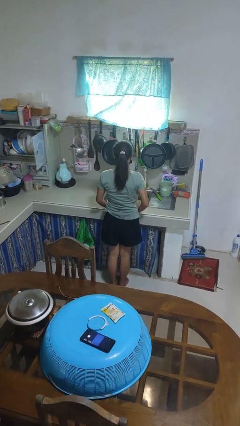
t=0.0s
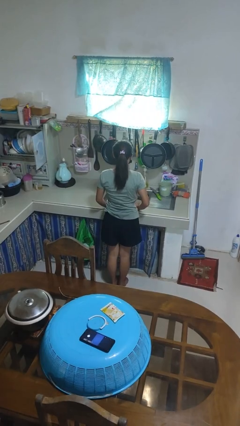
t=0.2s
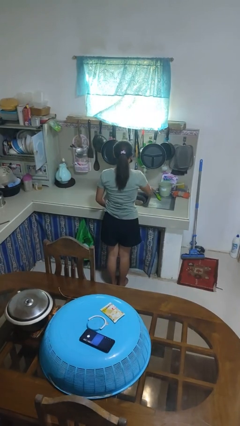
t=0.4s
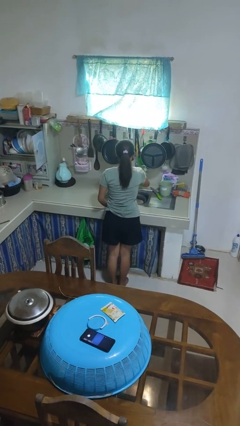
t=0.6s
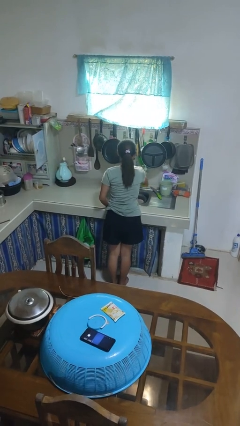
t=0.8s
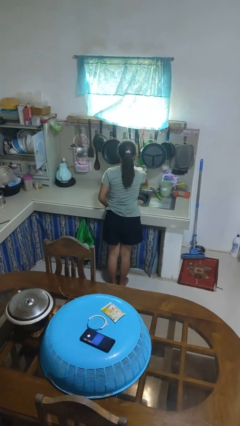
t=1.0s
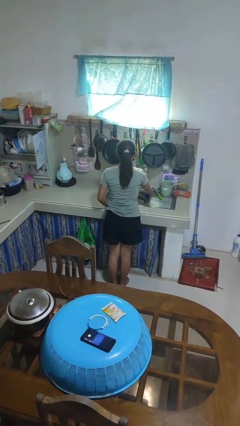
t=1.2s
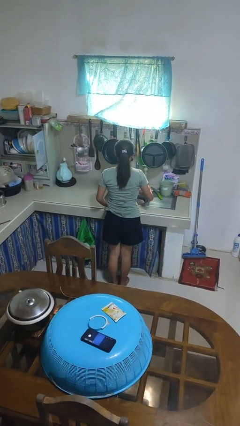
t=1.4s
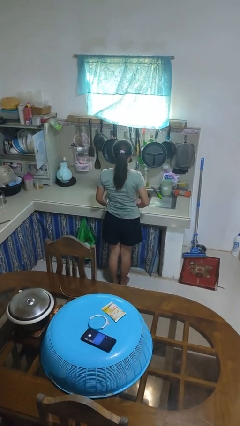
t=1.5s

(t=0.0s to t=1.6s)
person turns off faucet

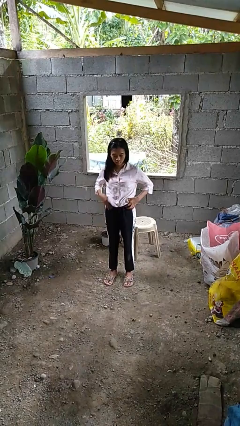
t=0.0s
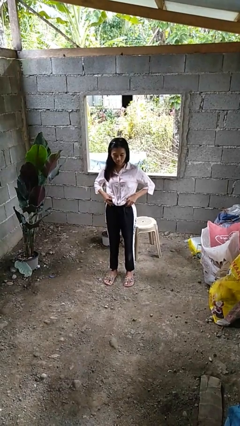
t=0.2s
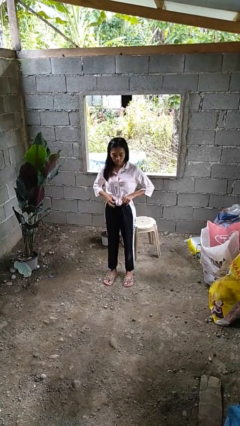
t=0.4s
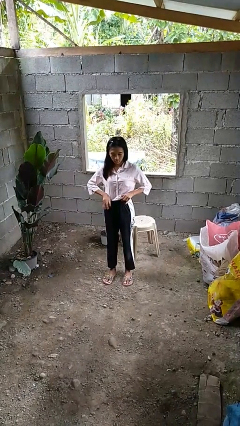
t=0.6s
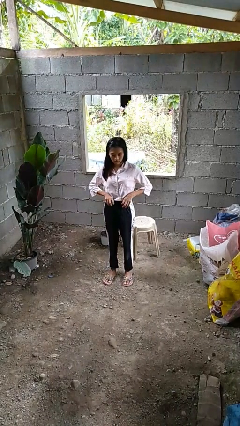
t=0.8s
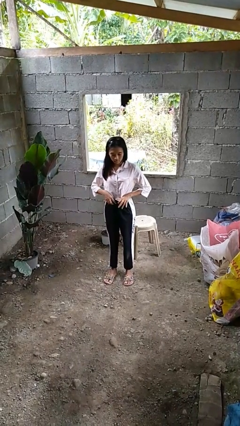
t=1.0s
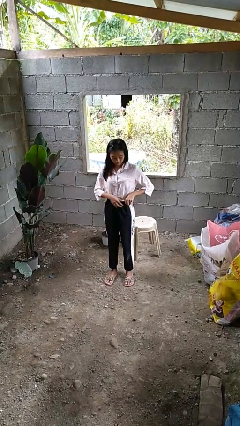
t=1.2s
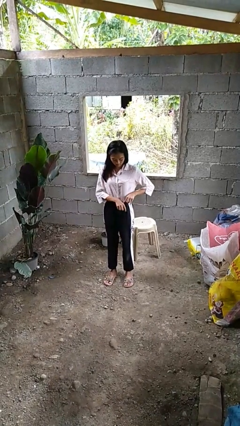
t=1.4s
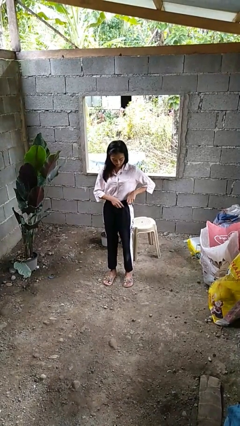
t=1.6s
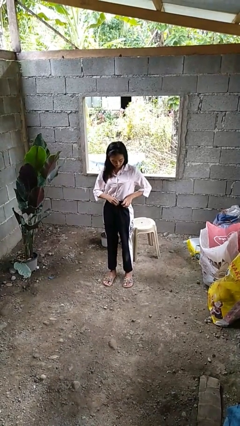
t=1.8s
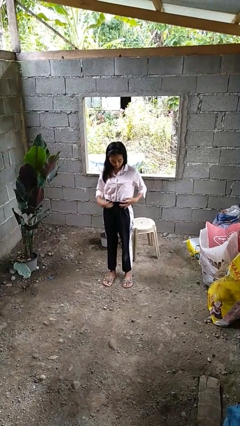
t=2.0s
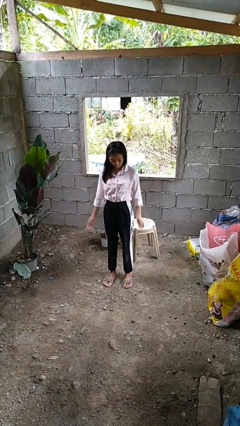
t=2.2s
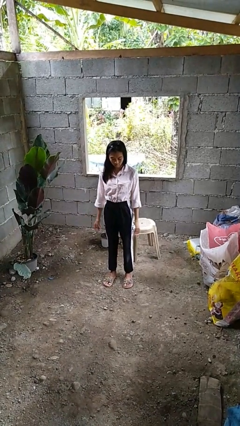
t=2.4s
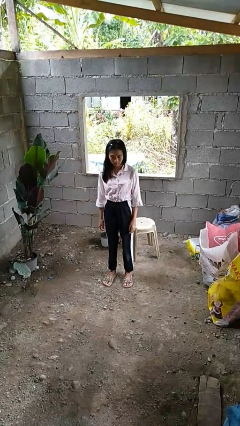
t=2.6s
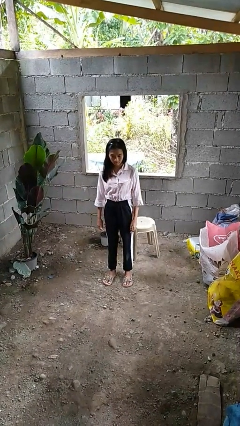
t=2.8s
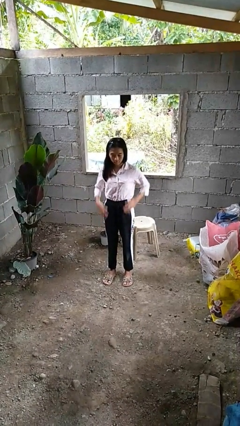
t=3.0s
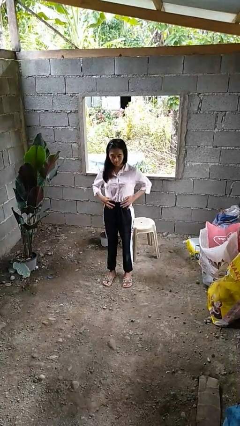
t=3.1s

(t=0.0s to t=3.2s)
person tucks in shirt

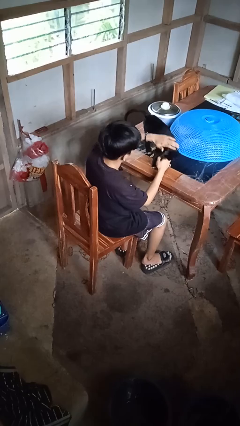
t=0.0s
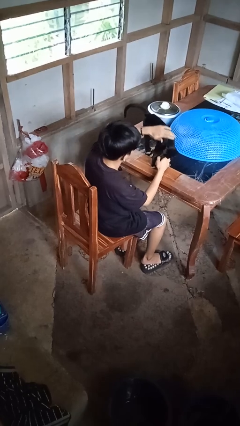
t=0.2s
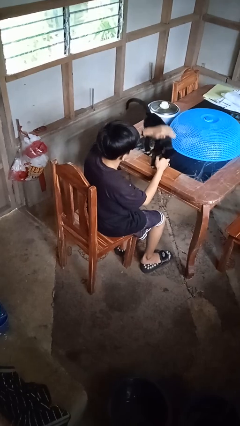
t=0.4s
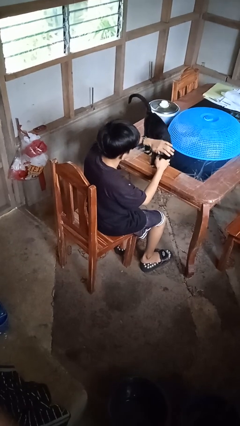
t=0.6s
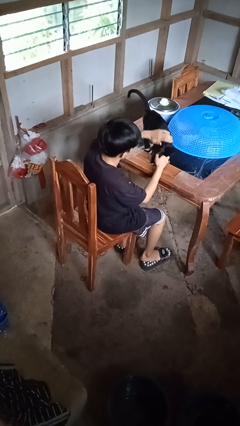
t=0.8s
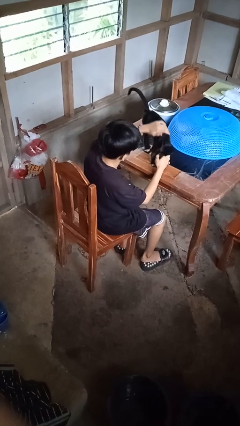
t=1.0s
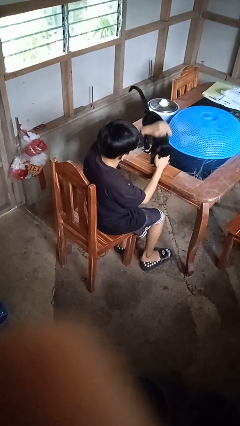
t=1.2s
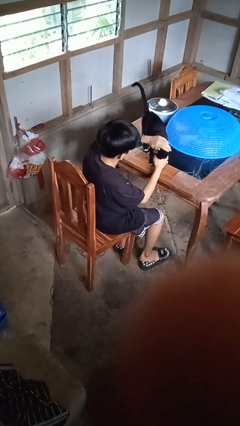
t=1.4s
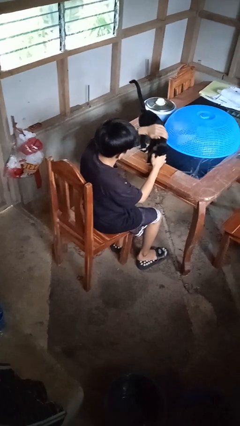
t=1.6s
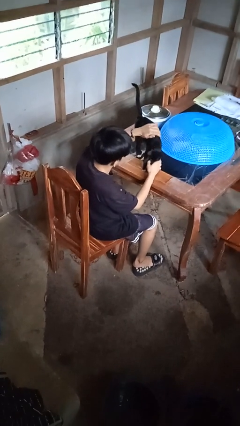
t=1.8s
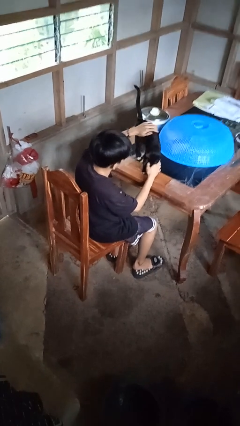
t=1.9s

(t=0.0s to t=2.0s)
person pets cat

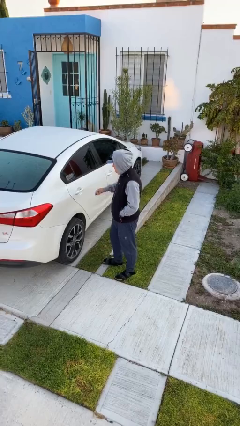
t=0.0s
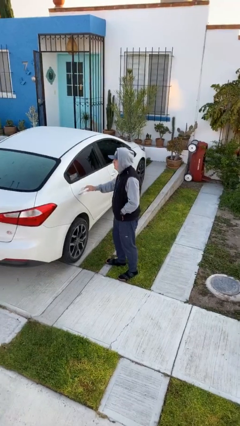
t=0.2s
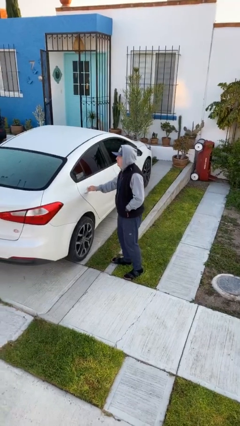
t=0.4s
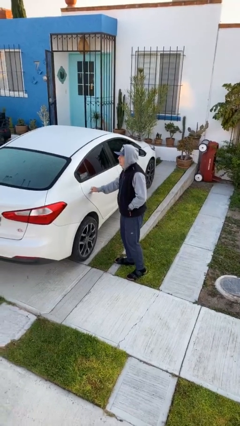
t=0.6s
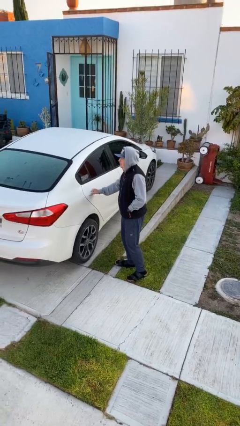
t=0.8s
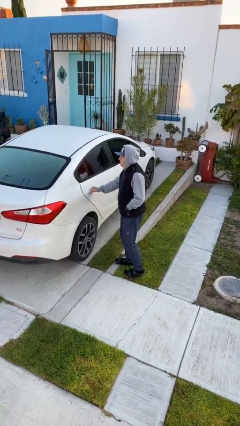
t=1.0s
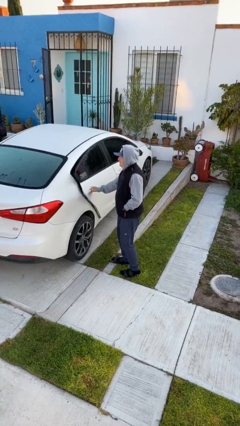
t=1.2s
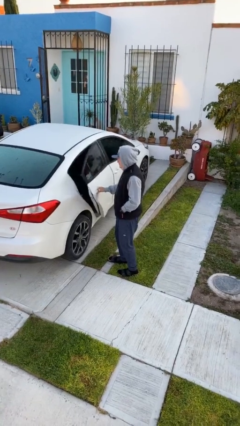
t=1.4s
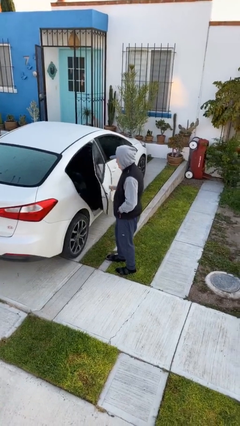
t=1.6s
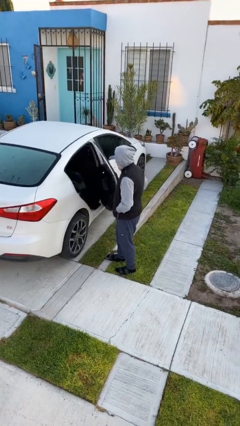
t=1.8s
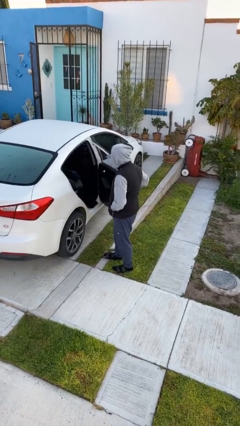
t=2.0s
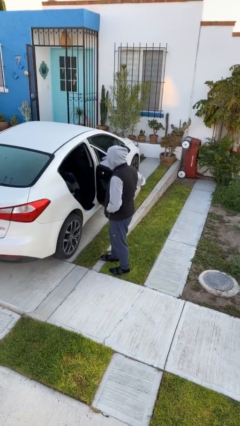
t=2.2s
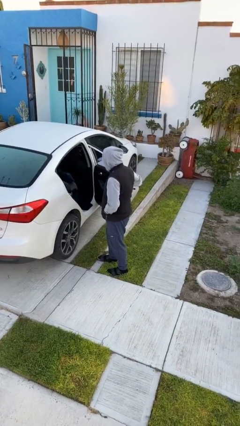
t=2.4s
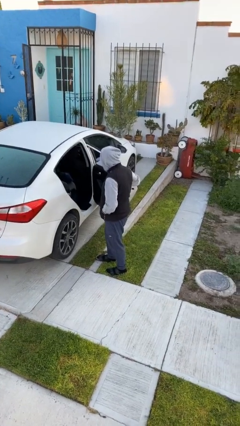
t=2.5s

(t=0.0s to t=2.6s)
person opens car door

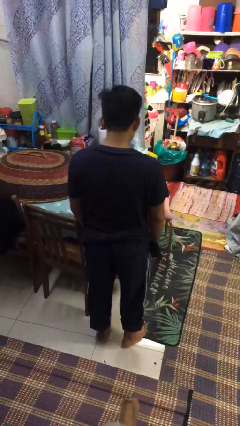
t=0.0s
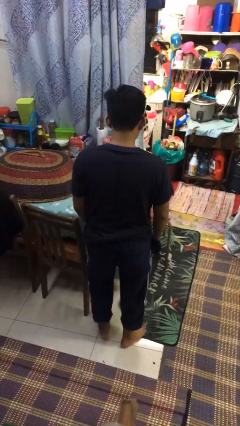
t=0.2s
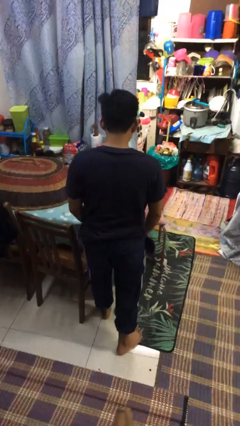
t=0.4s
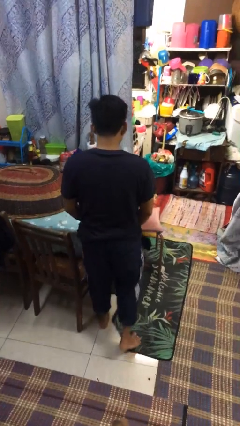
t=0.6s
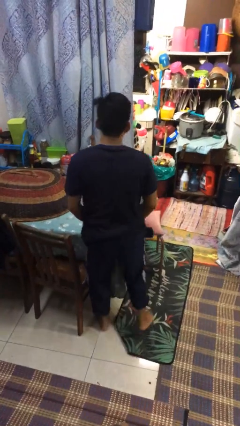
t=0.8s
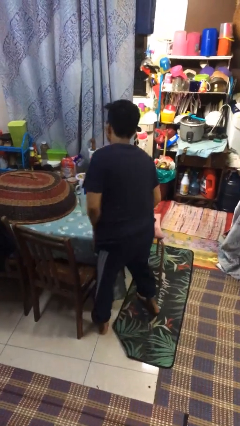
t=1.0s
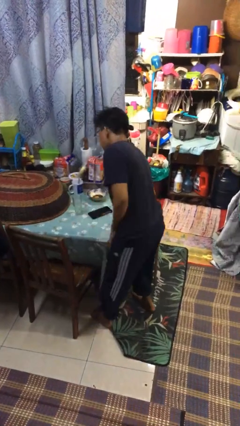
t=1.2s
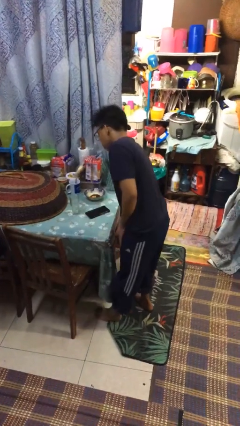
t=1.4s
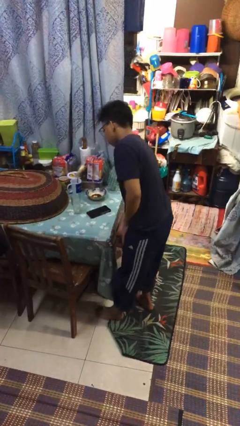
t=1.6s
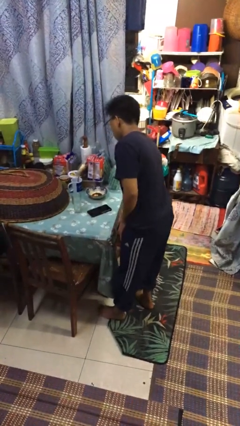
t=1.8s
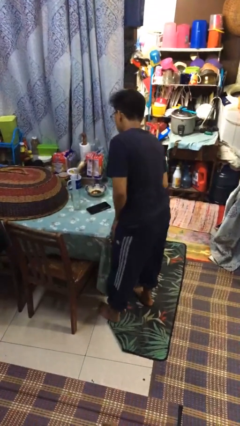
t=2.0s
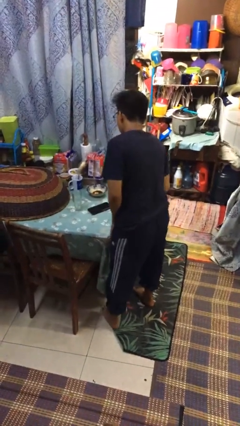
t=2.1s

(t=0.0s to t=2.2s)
person bumps into table

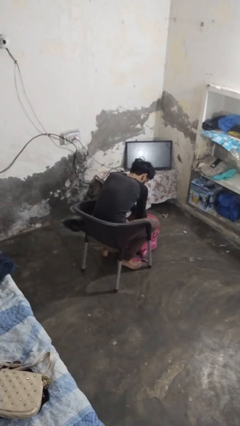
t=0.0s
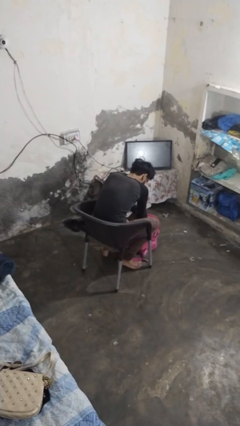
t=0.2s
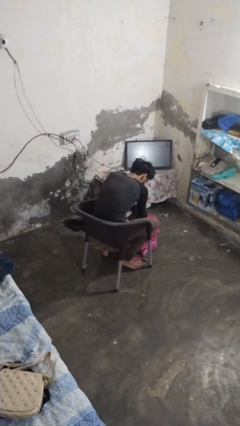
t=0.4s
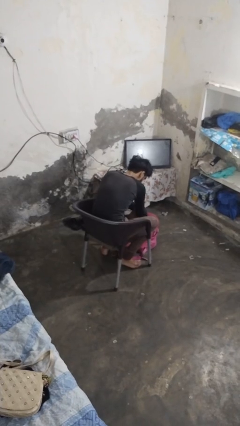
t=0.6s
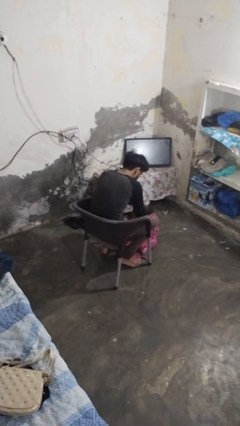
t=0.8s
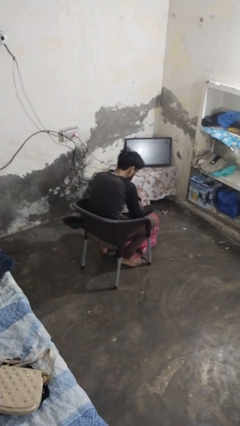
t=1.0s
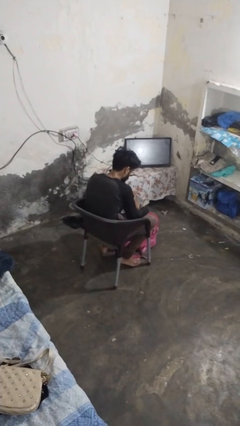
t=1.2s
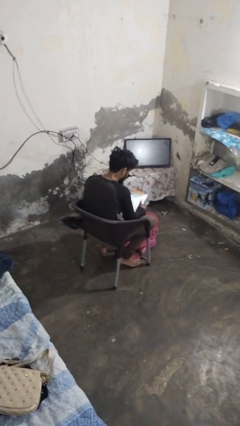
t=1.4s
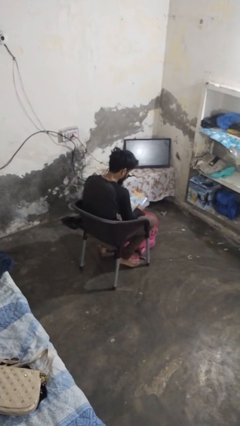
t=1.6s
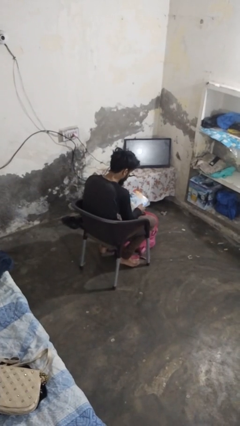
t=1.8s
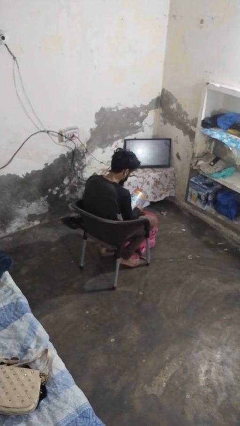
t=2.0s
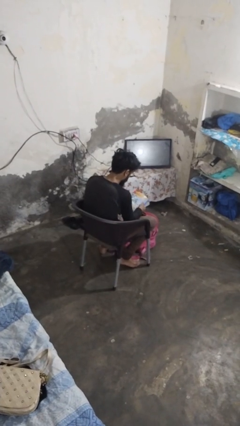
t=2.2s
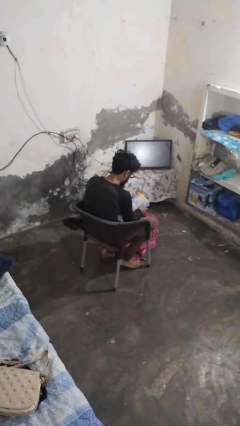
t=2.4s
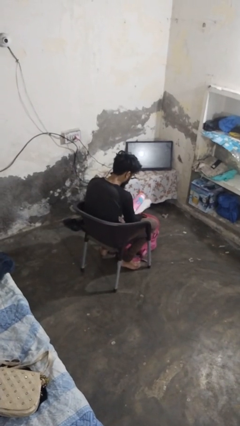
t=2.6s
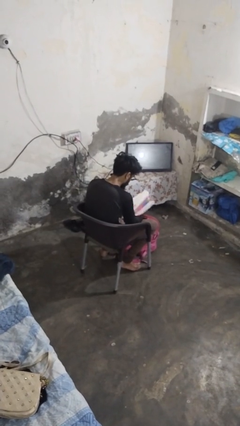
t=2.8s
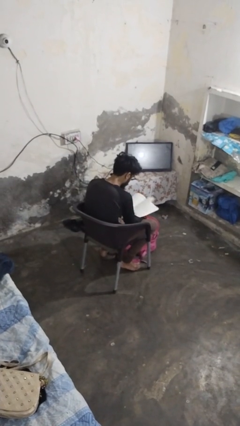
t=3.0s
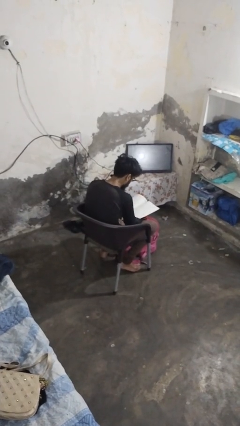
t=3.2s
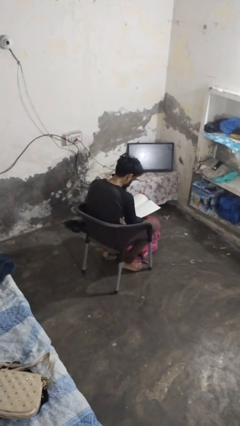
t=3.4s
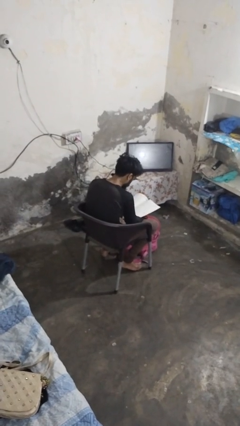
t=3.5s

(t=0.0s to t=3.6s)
person takes object from backpack

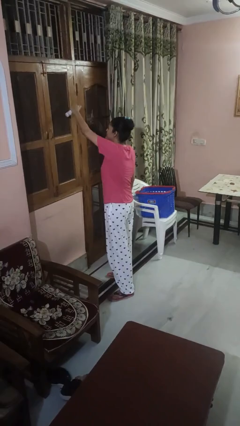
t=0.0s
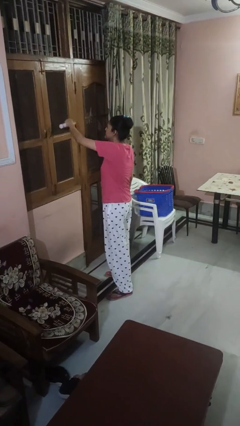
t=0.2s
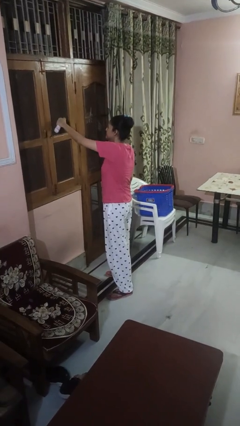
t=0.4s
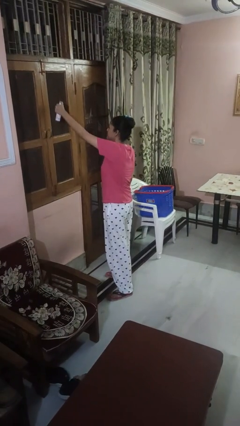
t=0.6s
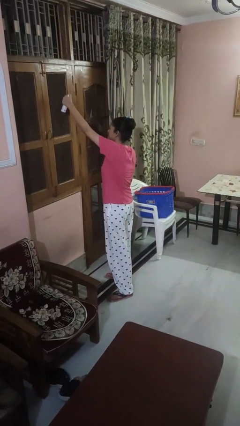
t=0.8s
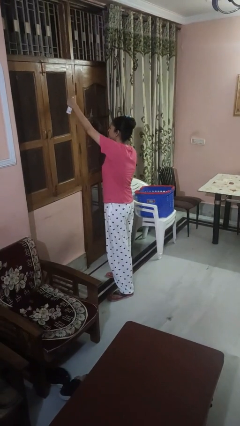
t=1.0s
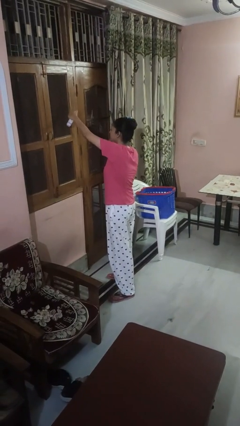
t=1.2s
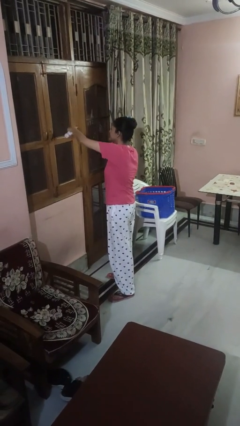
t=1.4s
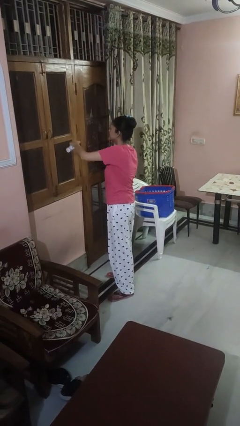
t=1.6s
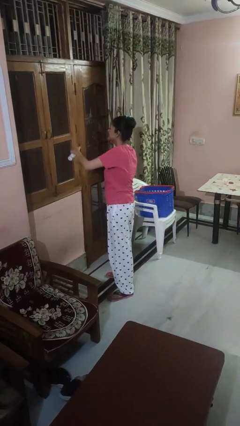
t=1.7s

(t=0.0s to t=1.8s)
person sprays from bottle
